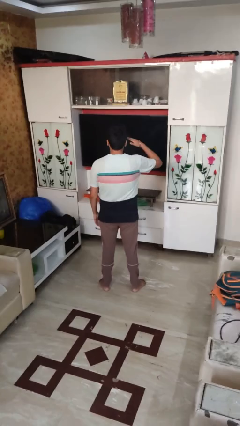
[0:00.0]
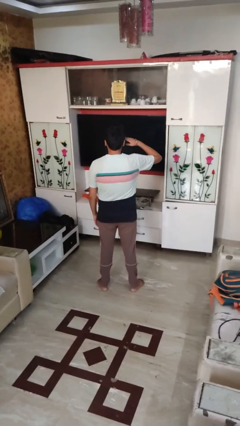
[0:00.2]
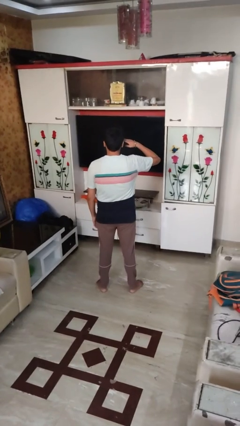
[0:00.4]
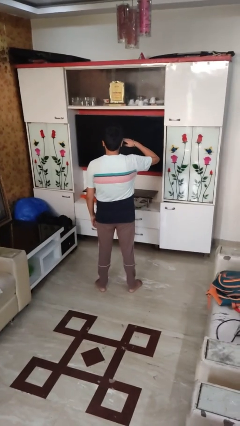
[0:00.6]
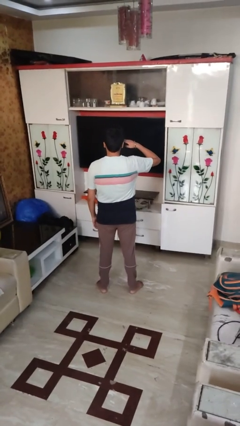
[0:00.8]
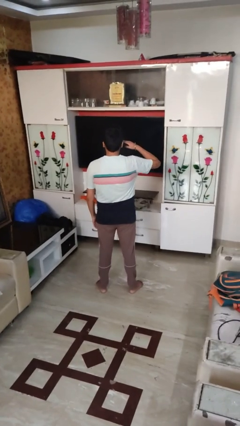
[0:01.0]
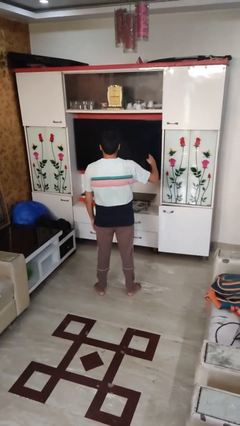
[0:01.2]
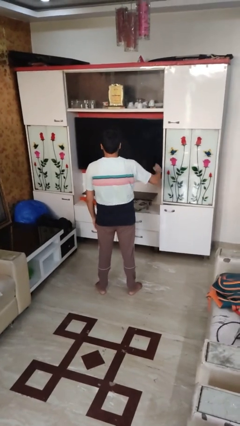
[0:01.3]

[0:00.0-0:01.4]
person salutes

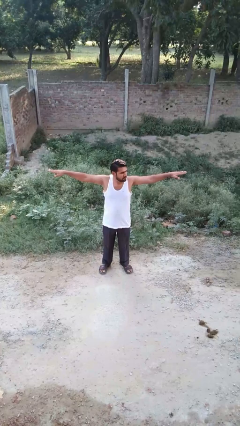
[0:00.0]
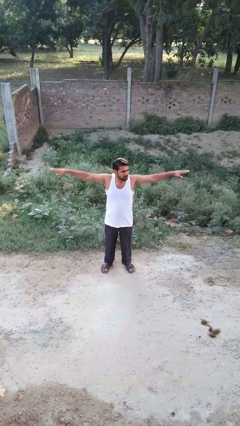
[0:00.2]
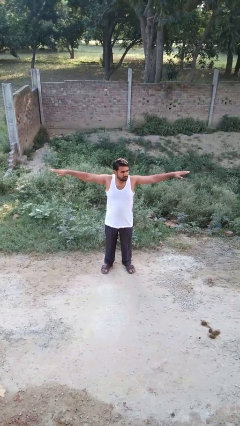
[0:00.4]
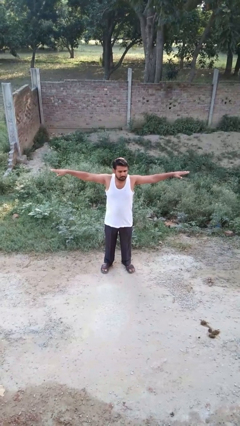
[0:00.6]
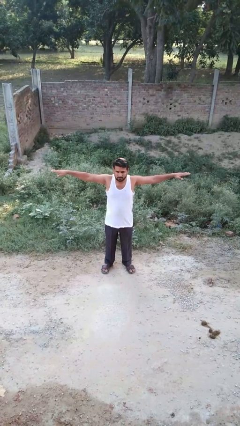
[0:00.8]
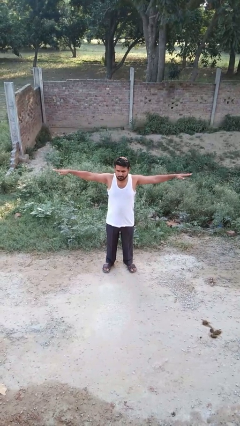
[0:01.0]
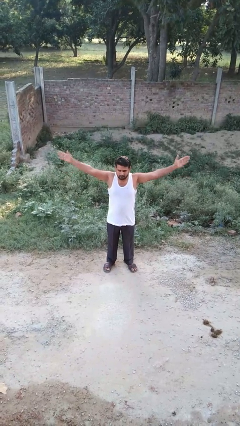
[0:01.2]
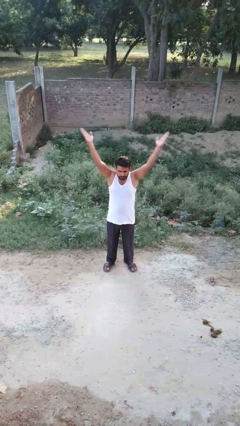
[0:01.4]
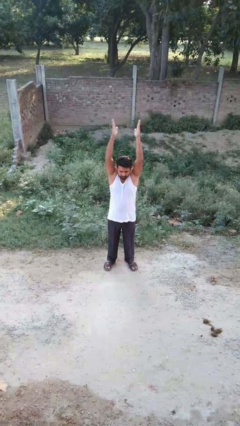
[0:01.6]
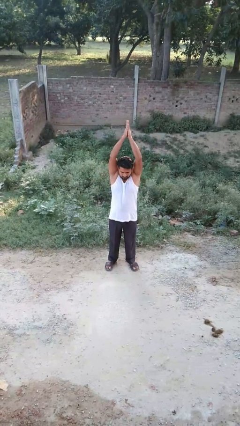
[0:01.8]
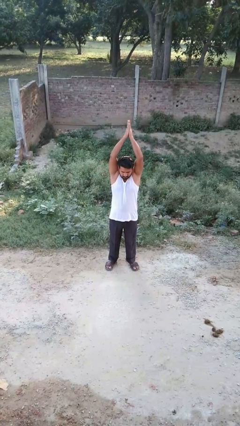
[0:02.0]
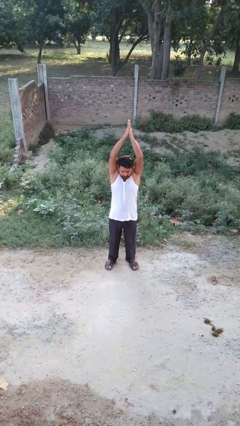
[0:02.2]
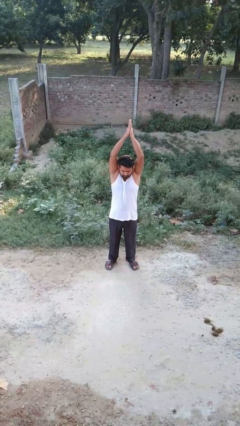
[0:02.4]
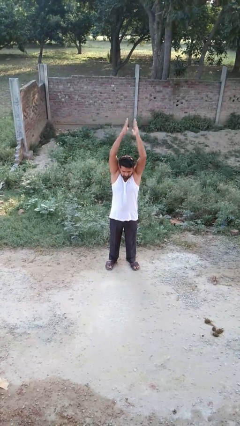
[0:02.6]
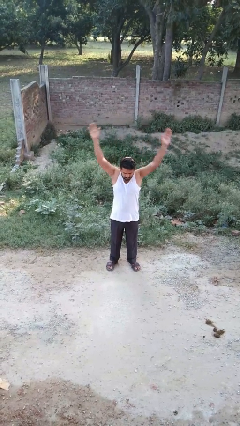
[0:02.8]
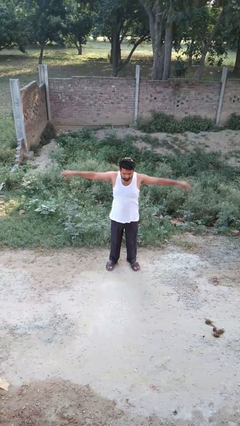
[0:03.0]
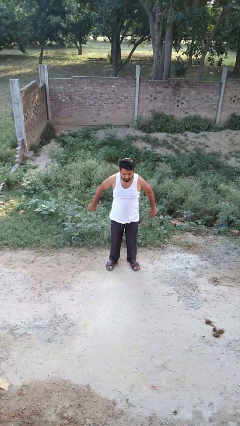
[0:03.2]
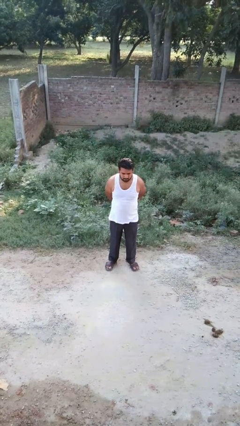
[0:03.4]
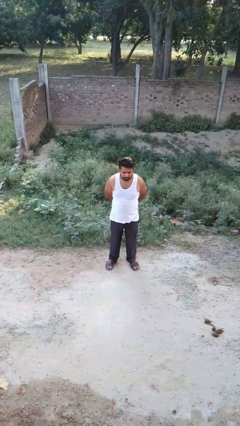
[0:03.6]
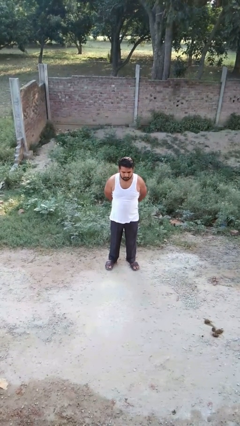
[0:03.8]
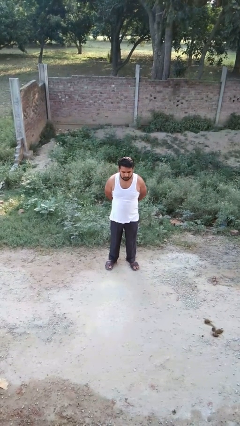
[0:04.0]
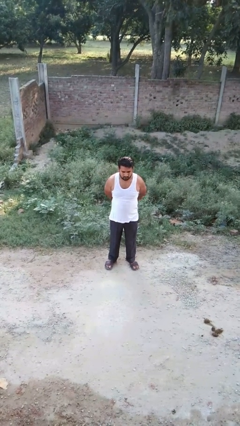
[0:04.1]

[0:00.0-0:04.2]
person stretches arms over head

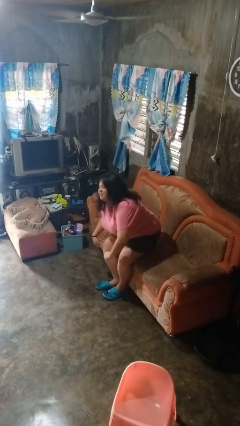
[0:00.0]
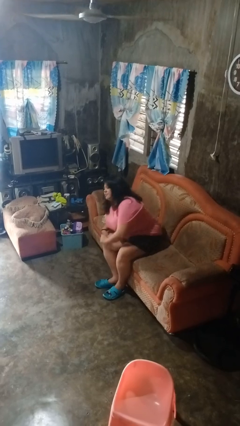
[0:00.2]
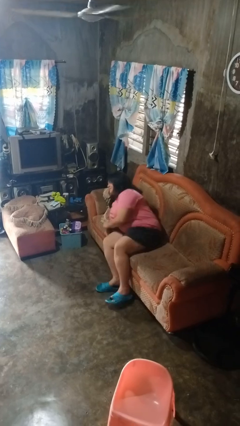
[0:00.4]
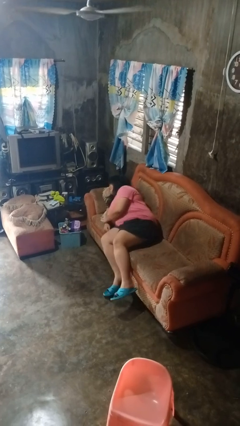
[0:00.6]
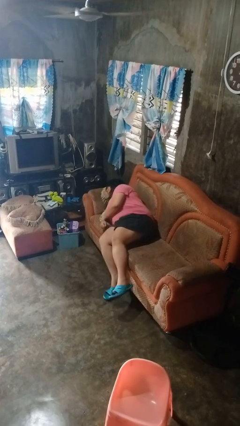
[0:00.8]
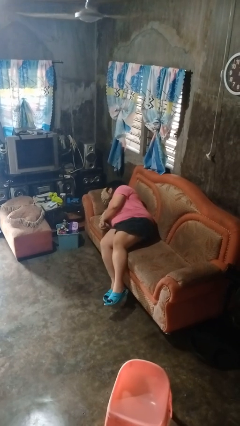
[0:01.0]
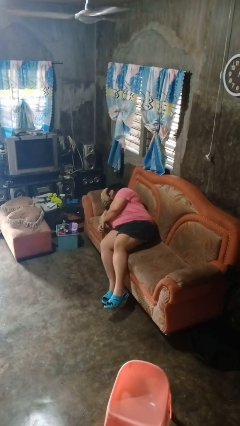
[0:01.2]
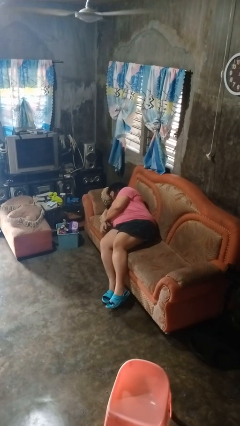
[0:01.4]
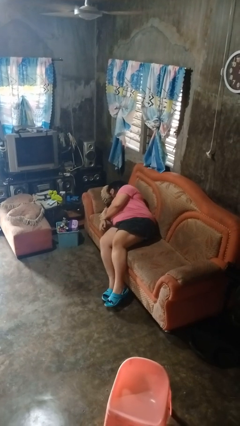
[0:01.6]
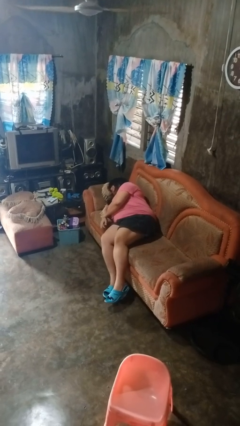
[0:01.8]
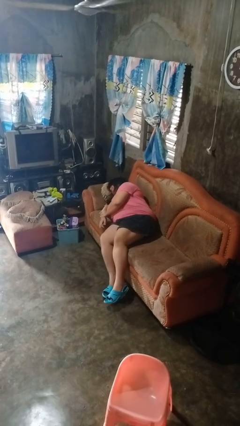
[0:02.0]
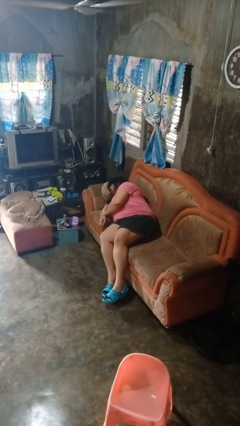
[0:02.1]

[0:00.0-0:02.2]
person lies down on couch

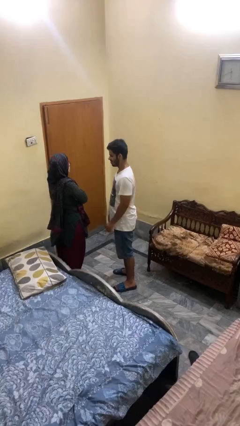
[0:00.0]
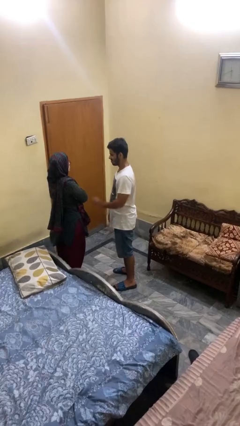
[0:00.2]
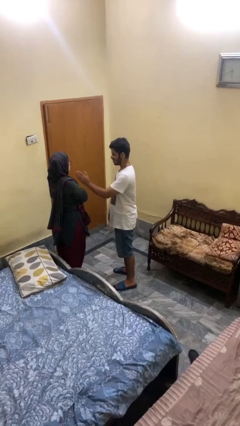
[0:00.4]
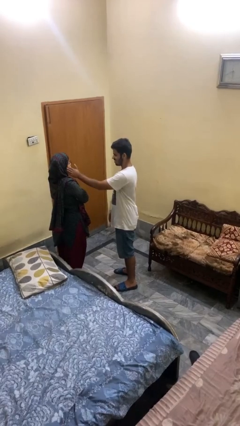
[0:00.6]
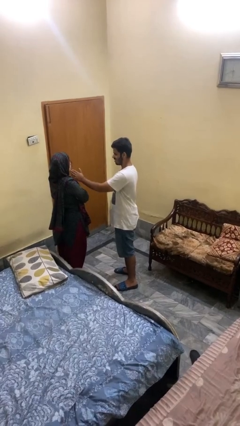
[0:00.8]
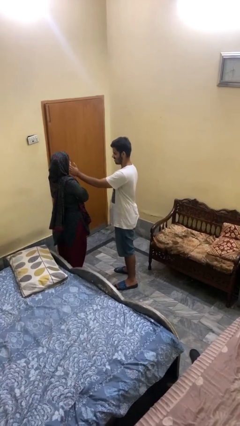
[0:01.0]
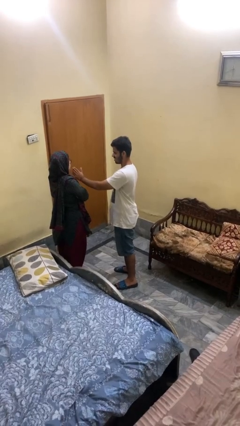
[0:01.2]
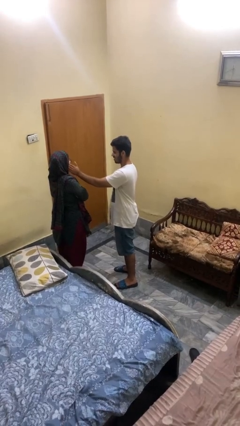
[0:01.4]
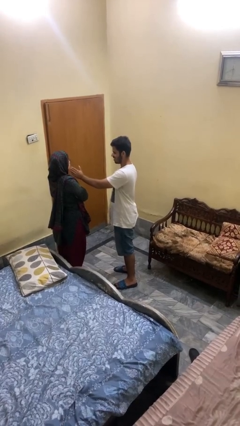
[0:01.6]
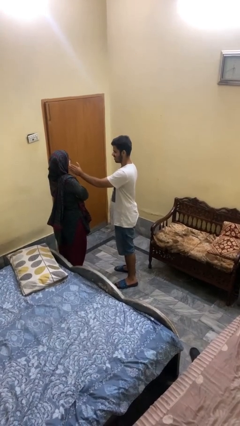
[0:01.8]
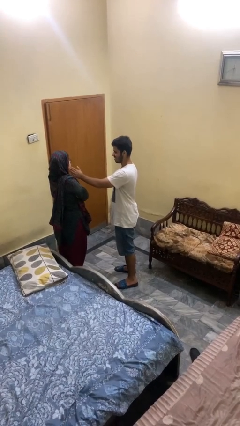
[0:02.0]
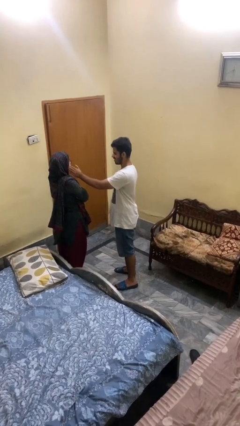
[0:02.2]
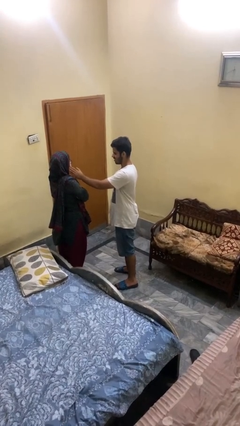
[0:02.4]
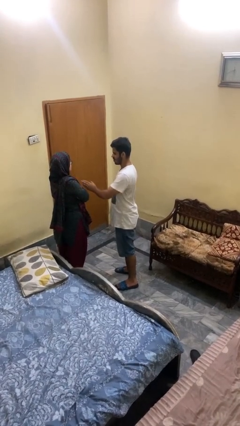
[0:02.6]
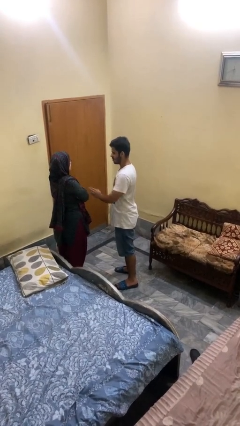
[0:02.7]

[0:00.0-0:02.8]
person touches face of person

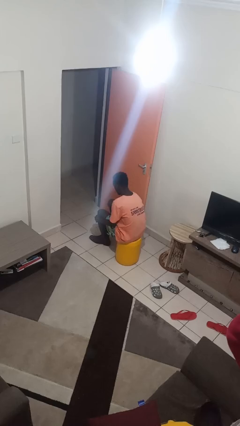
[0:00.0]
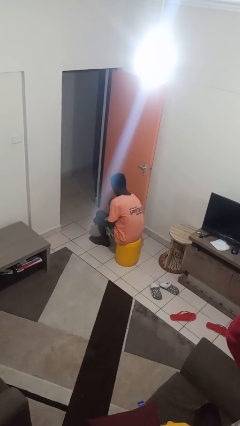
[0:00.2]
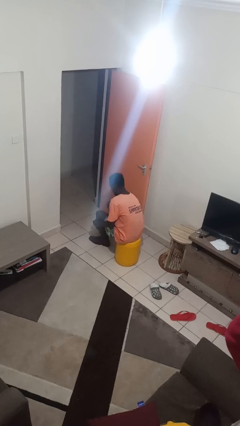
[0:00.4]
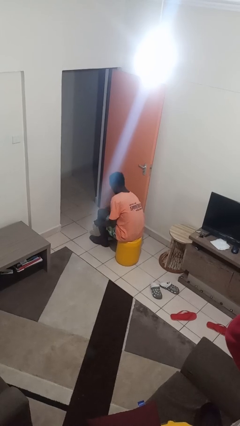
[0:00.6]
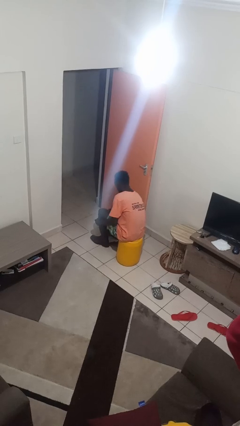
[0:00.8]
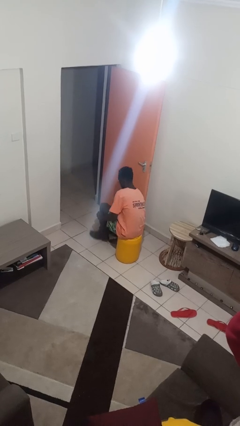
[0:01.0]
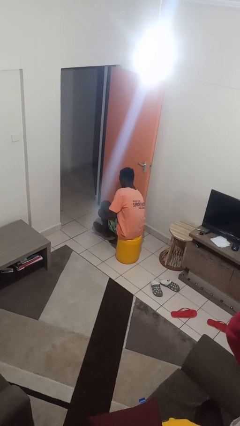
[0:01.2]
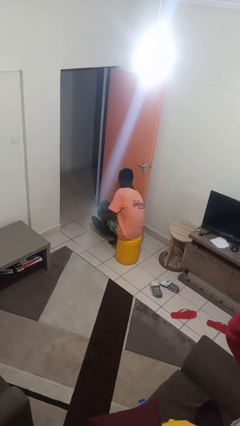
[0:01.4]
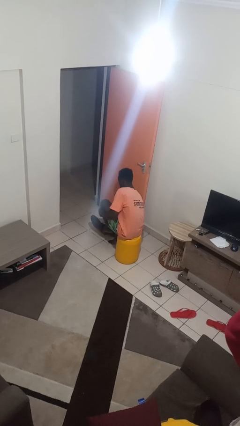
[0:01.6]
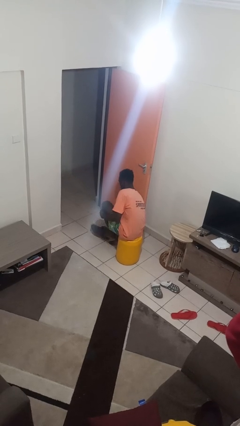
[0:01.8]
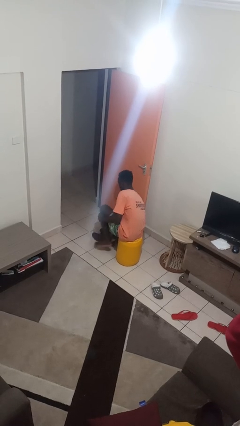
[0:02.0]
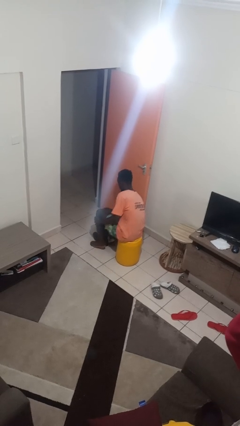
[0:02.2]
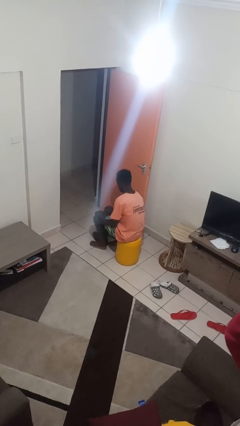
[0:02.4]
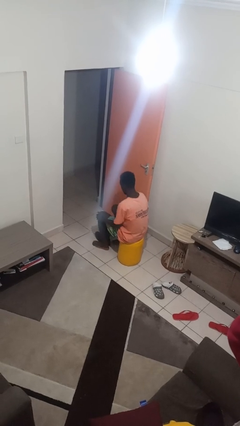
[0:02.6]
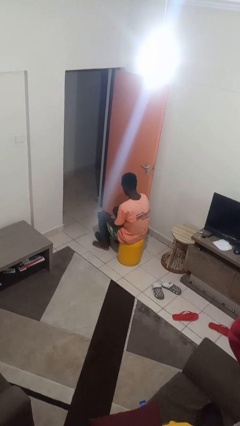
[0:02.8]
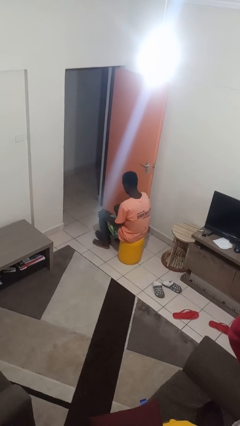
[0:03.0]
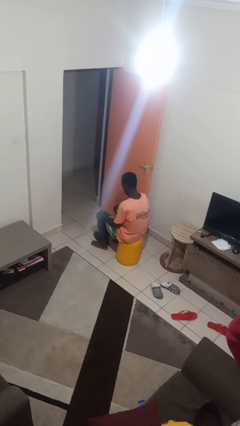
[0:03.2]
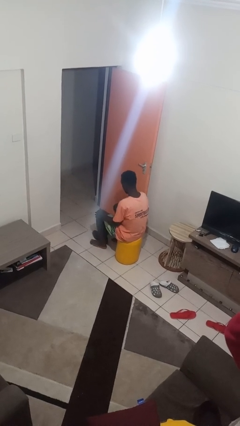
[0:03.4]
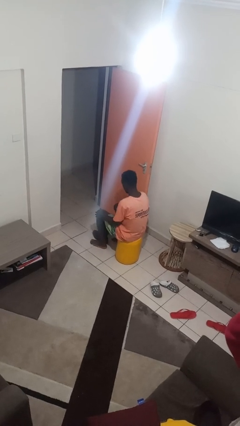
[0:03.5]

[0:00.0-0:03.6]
person takes off shoes

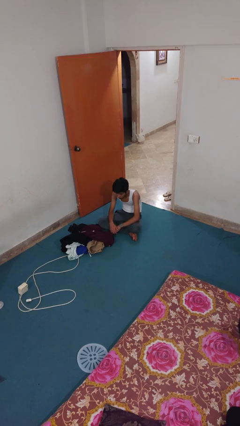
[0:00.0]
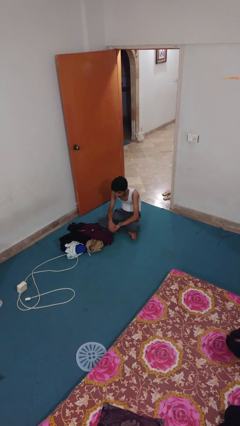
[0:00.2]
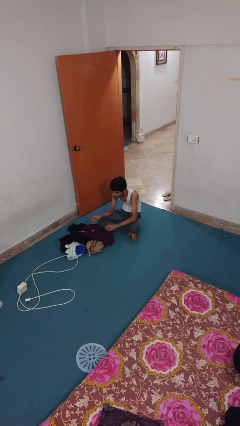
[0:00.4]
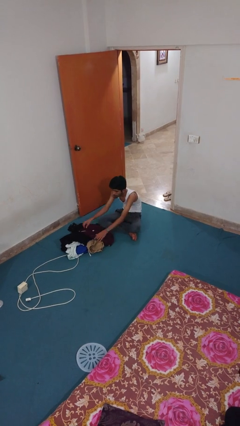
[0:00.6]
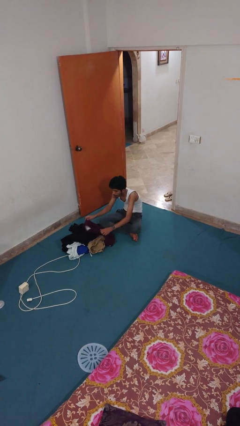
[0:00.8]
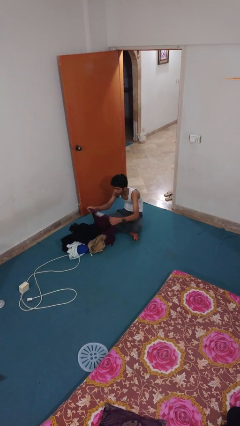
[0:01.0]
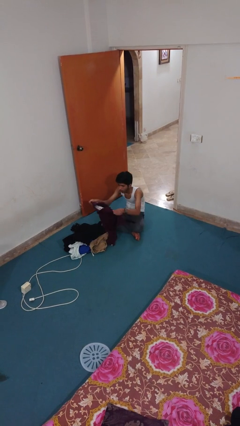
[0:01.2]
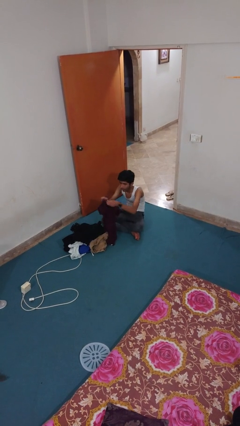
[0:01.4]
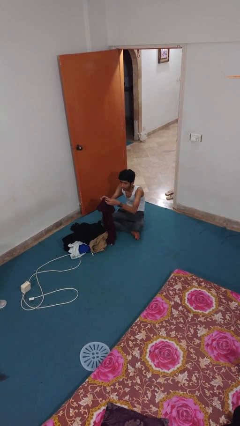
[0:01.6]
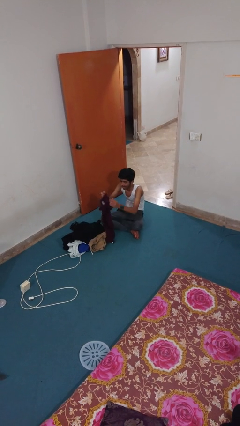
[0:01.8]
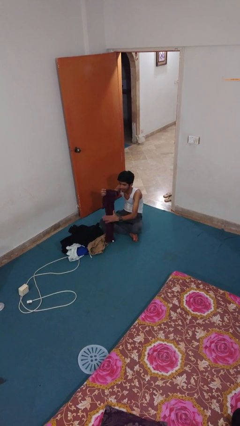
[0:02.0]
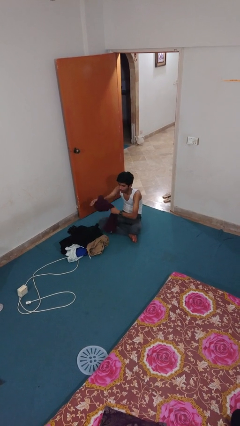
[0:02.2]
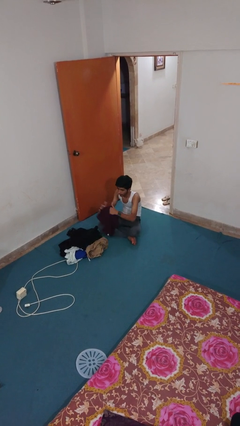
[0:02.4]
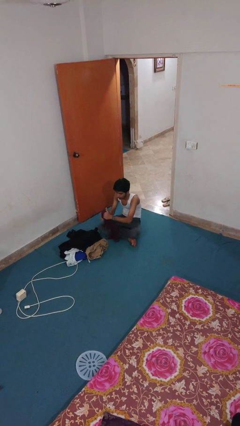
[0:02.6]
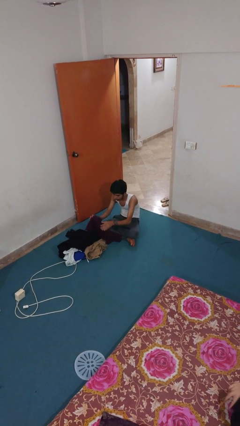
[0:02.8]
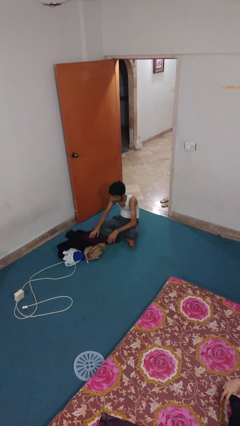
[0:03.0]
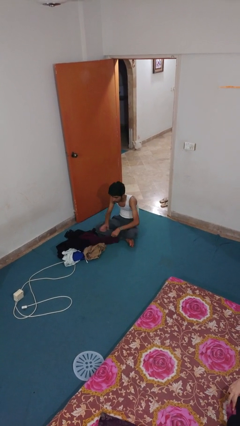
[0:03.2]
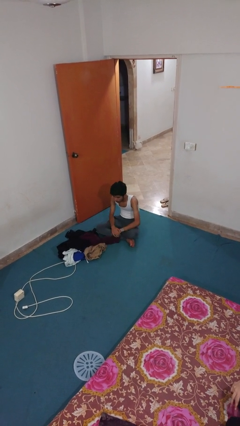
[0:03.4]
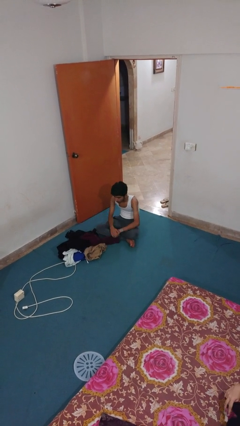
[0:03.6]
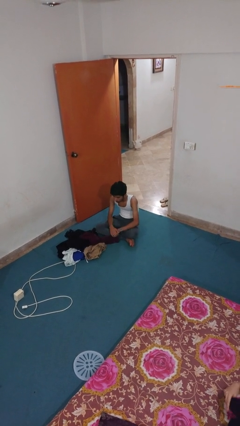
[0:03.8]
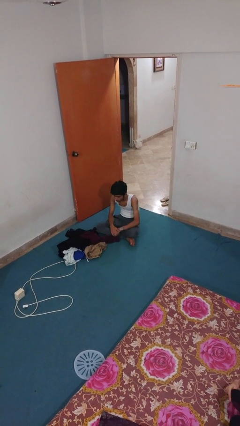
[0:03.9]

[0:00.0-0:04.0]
person folds shirt
